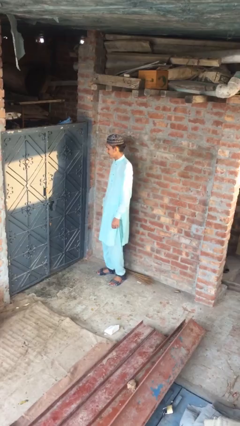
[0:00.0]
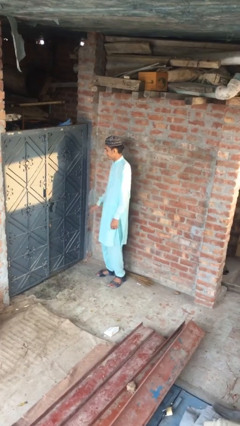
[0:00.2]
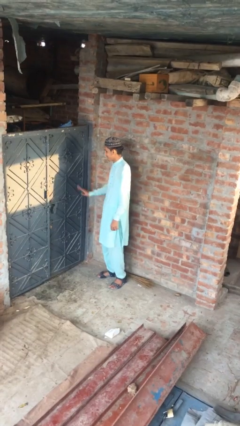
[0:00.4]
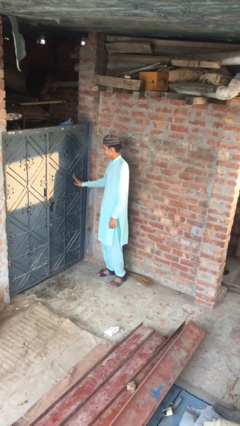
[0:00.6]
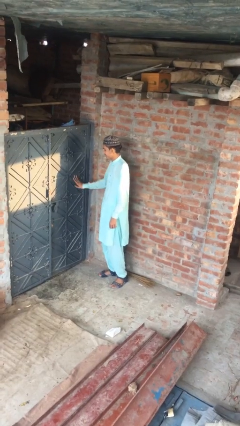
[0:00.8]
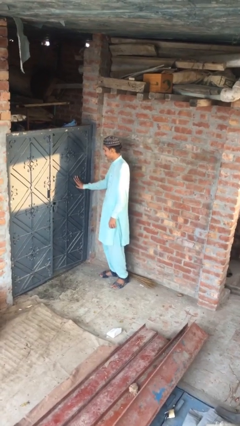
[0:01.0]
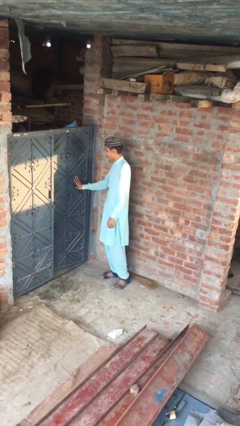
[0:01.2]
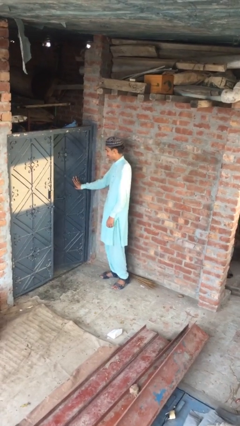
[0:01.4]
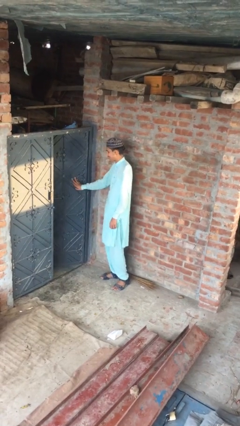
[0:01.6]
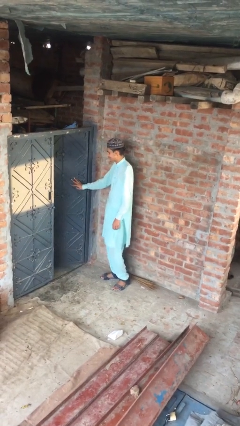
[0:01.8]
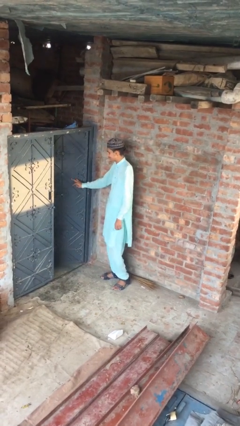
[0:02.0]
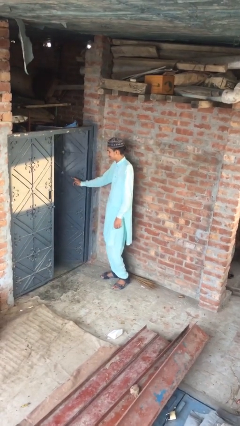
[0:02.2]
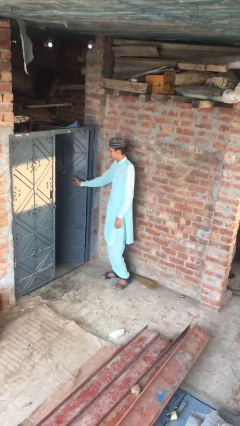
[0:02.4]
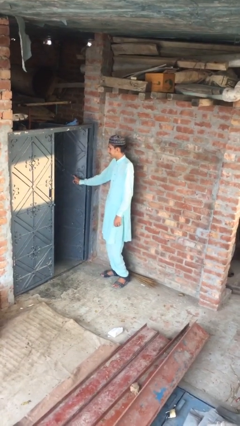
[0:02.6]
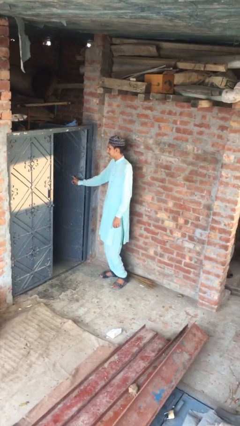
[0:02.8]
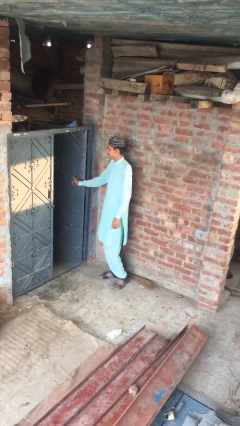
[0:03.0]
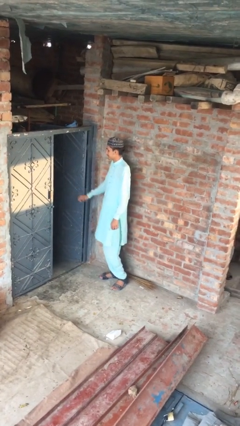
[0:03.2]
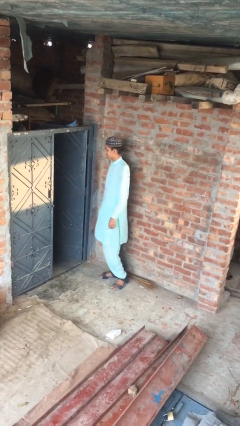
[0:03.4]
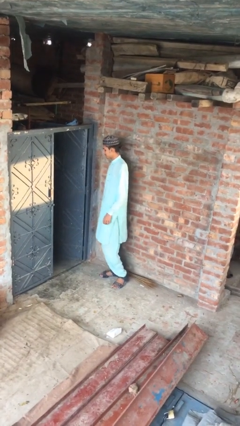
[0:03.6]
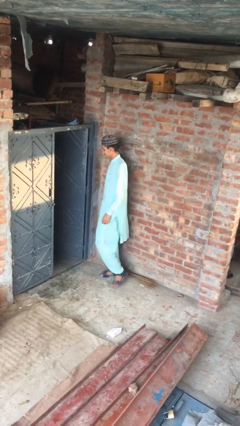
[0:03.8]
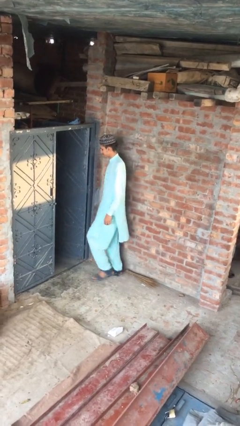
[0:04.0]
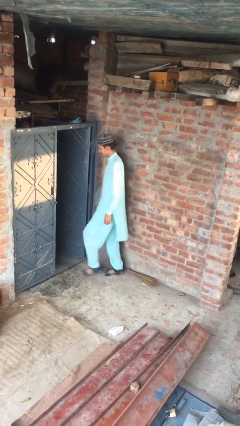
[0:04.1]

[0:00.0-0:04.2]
person opens facility door

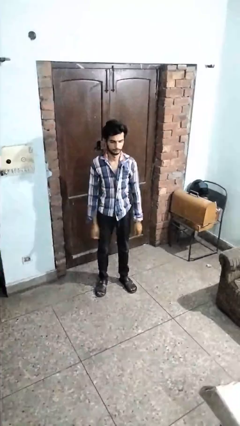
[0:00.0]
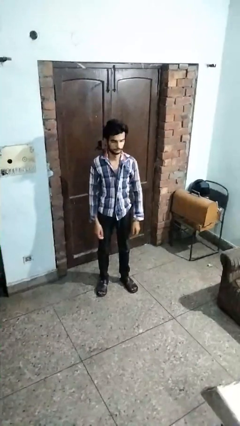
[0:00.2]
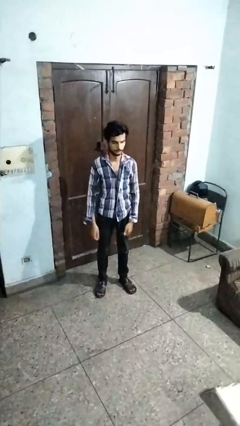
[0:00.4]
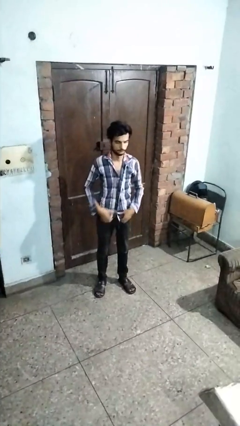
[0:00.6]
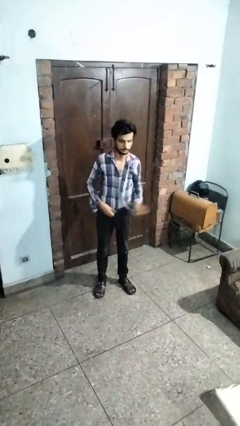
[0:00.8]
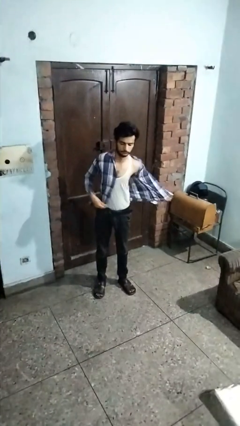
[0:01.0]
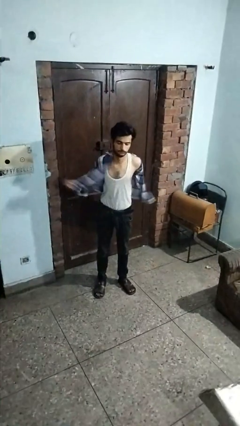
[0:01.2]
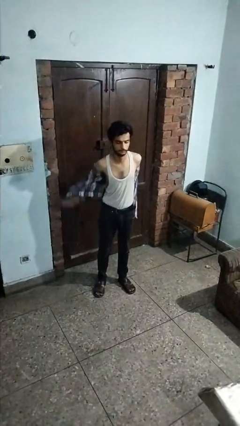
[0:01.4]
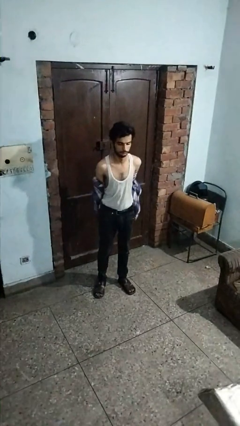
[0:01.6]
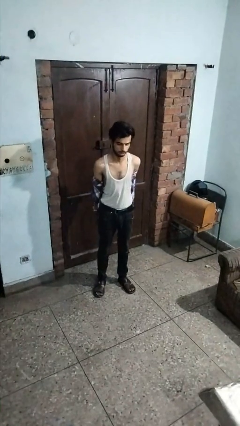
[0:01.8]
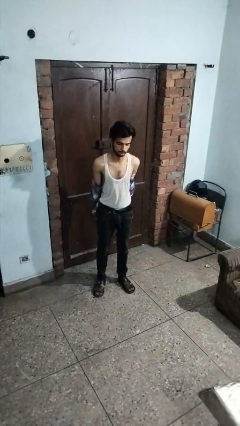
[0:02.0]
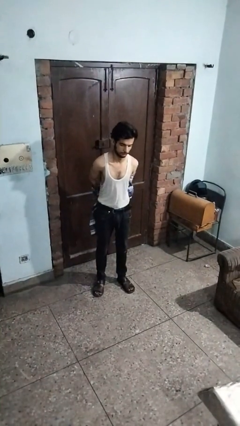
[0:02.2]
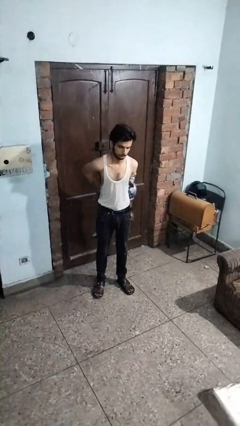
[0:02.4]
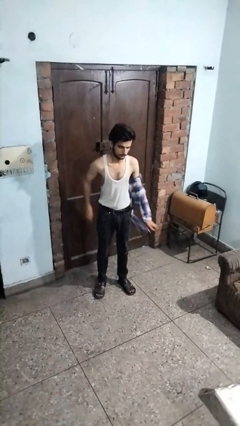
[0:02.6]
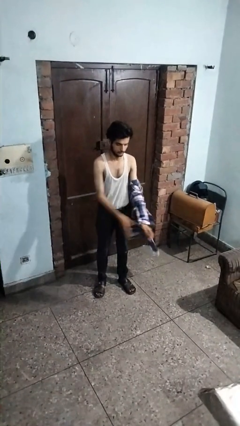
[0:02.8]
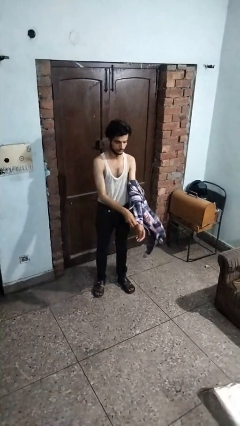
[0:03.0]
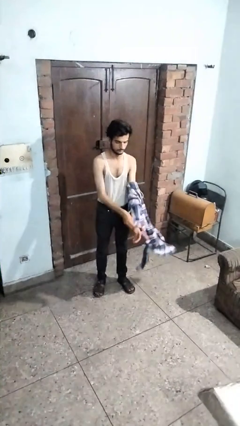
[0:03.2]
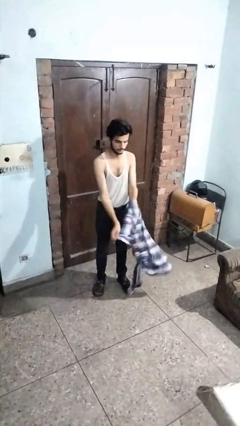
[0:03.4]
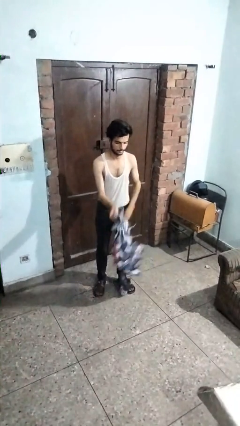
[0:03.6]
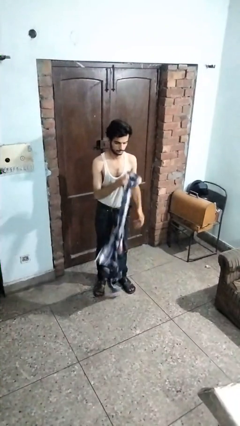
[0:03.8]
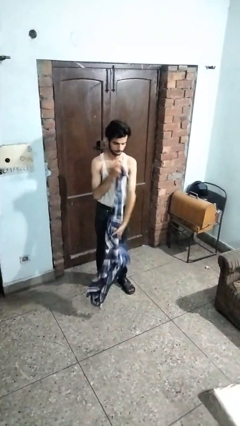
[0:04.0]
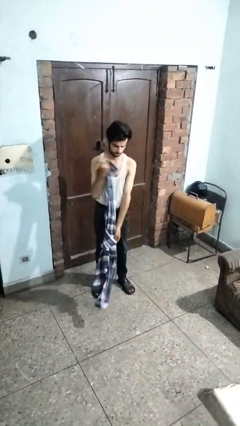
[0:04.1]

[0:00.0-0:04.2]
person takes off shirt

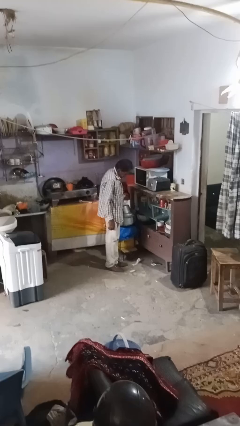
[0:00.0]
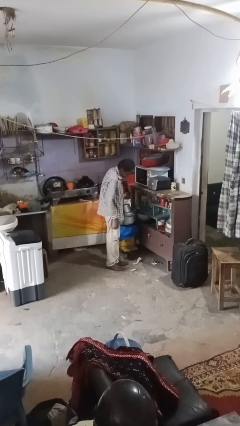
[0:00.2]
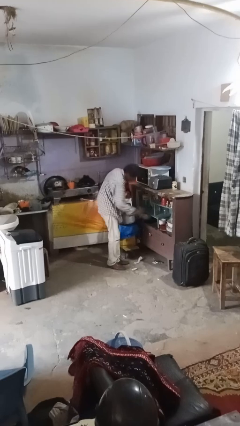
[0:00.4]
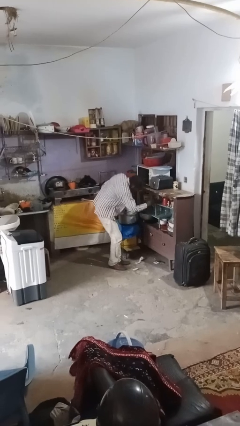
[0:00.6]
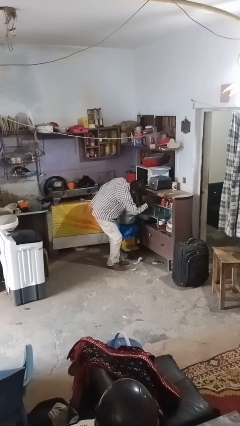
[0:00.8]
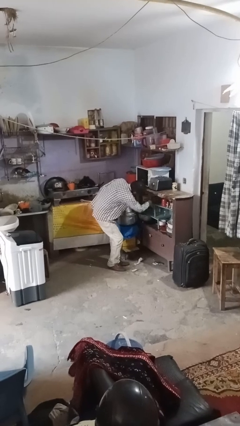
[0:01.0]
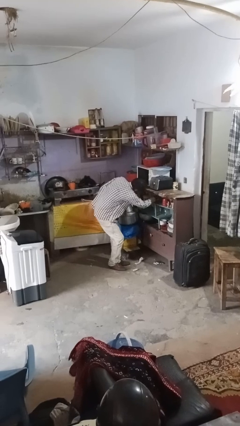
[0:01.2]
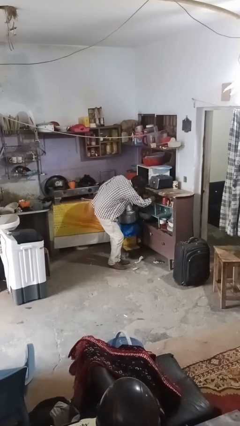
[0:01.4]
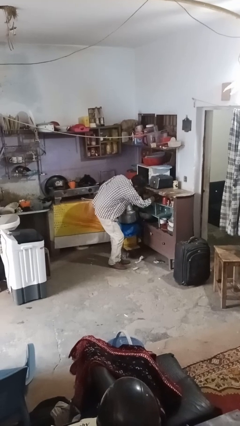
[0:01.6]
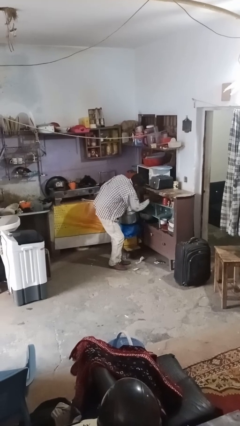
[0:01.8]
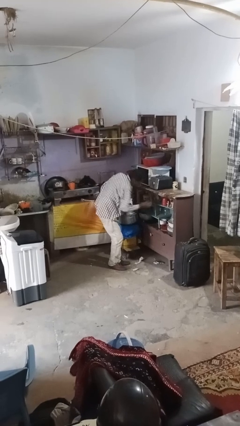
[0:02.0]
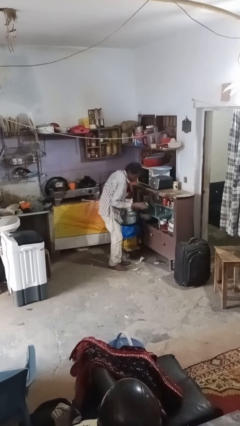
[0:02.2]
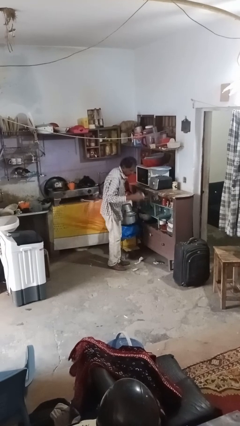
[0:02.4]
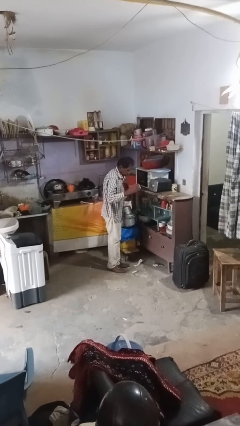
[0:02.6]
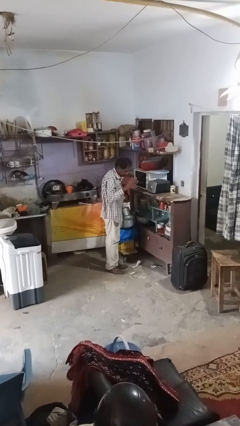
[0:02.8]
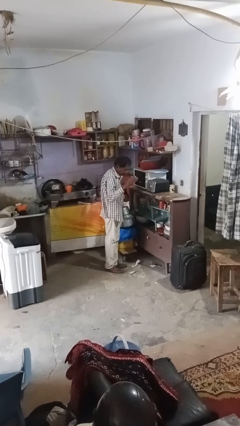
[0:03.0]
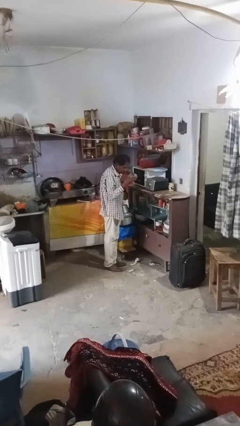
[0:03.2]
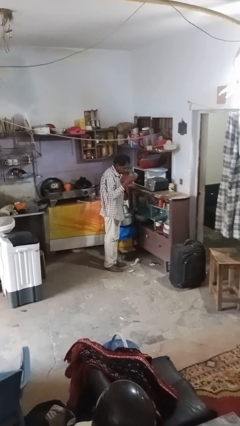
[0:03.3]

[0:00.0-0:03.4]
person takes object from kitchen drawer

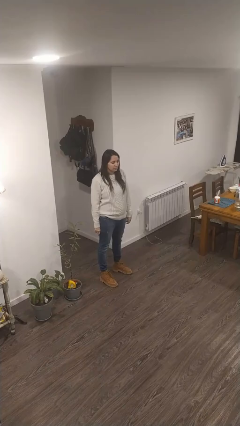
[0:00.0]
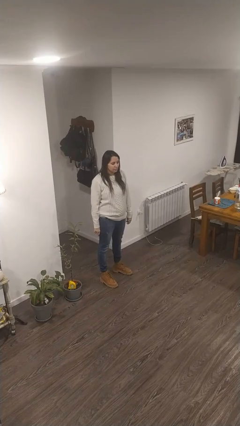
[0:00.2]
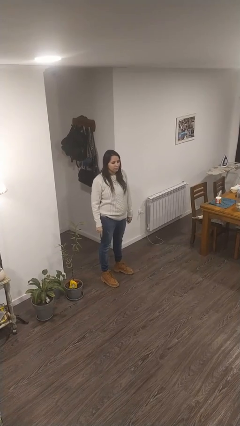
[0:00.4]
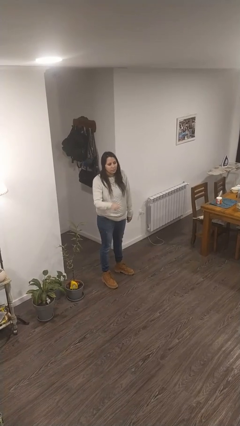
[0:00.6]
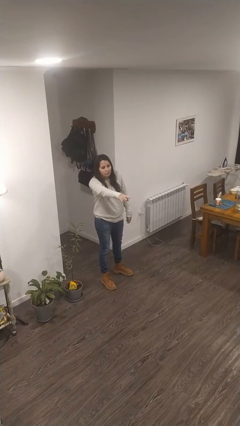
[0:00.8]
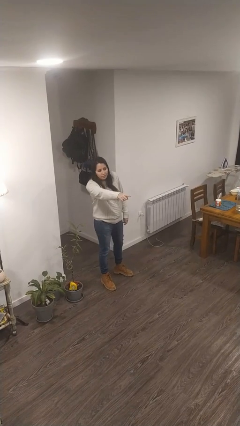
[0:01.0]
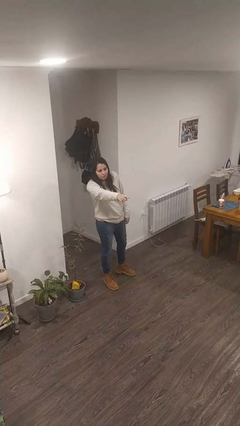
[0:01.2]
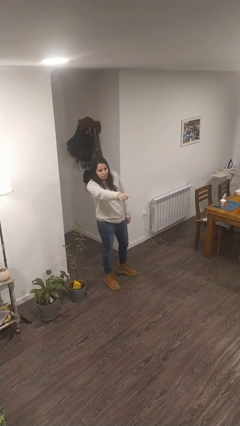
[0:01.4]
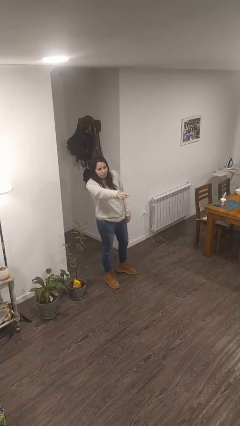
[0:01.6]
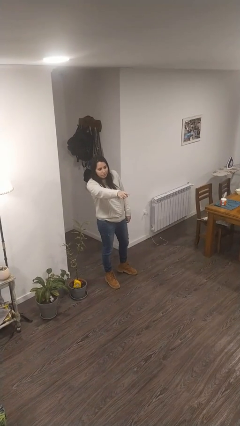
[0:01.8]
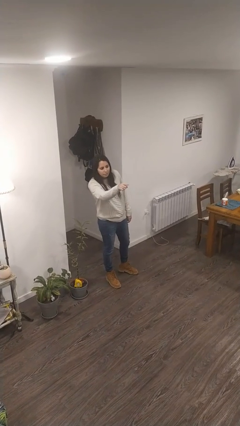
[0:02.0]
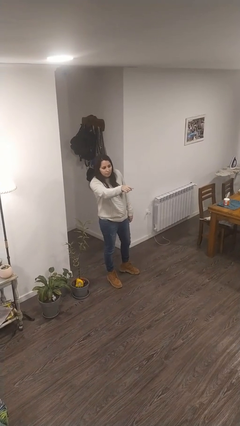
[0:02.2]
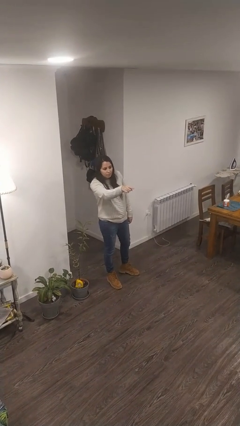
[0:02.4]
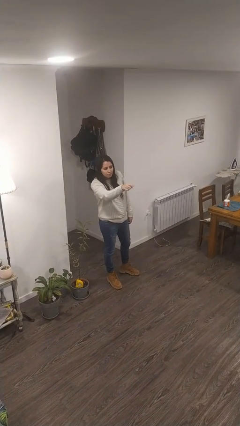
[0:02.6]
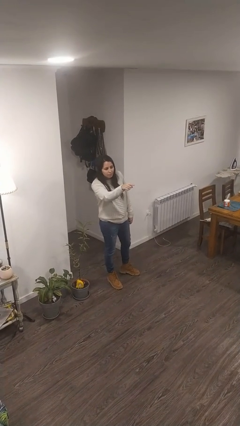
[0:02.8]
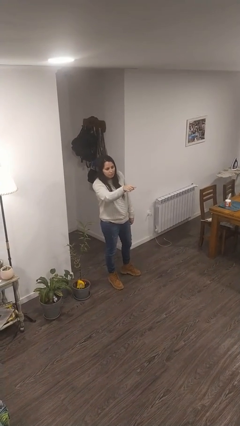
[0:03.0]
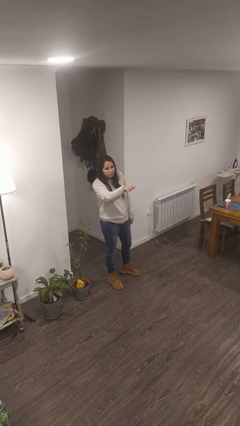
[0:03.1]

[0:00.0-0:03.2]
person points at person

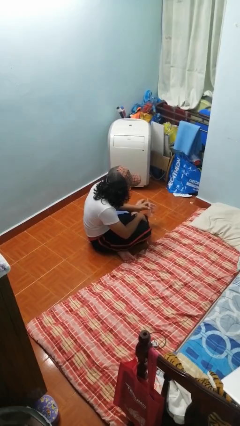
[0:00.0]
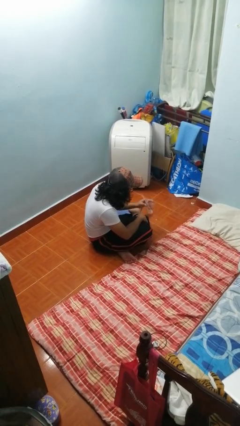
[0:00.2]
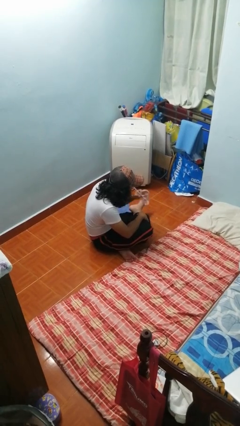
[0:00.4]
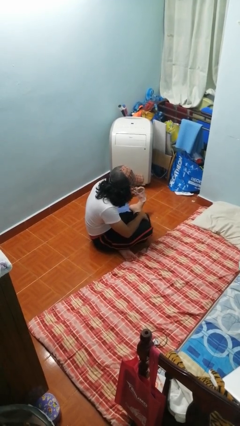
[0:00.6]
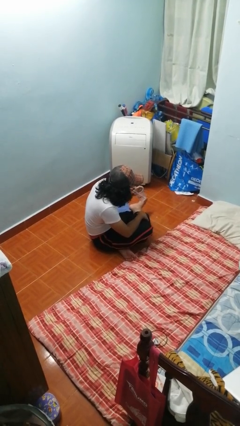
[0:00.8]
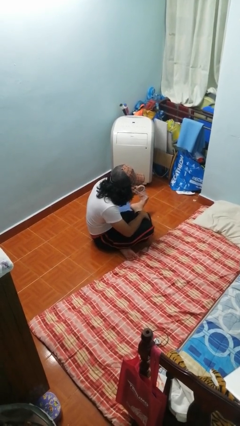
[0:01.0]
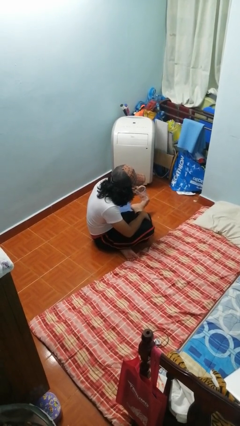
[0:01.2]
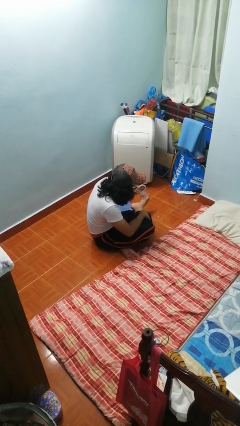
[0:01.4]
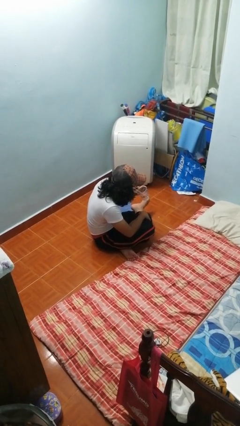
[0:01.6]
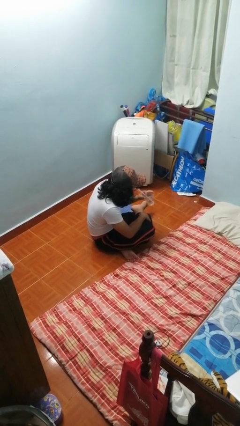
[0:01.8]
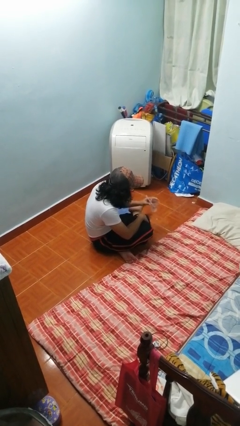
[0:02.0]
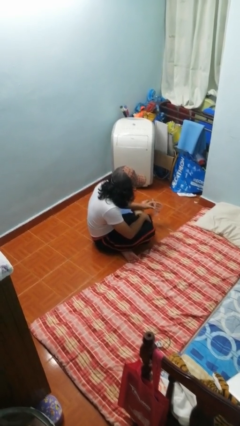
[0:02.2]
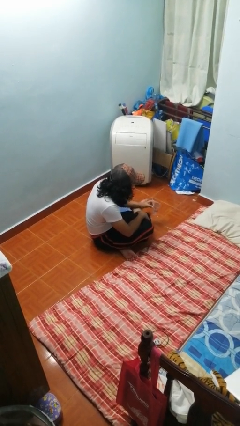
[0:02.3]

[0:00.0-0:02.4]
person drinks from straw
